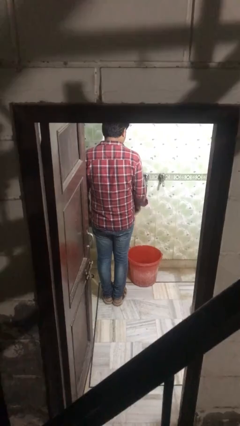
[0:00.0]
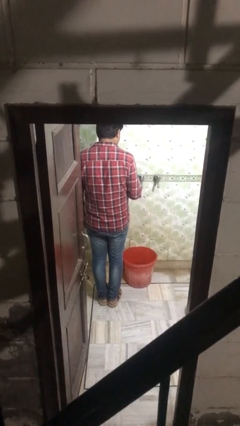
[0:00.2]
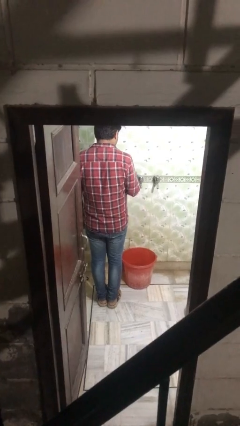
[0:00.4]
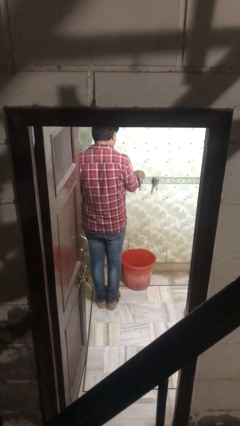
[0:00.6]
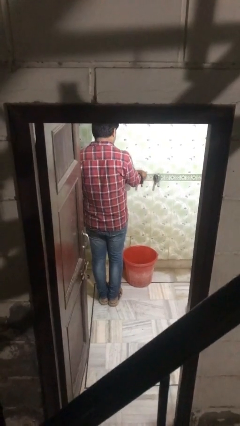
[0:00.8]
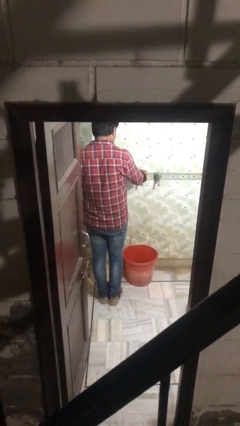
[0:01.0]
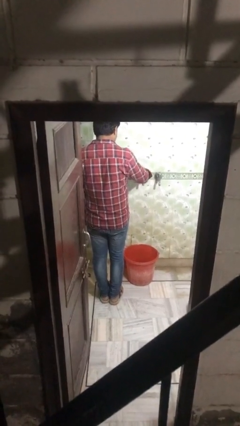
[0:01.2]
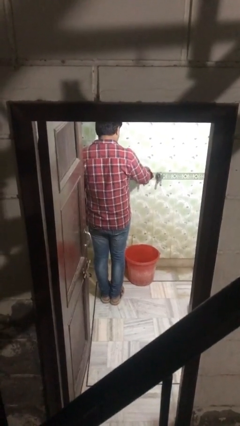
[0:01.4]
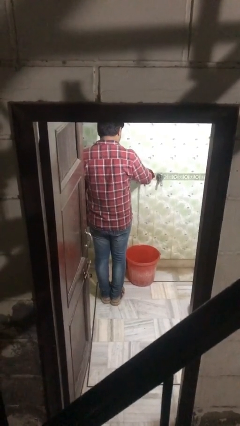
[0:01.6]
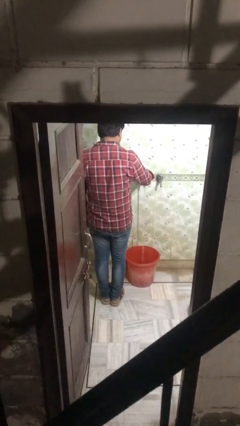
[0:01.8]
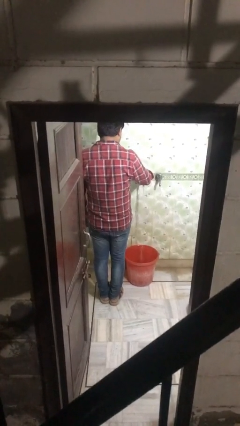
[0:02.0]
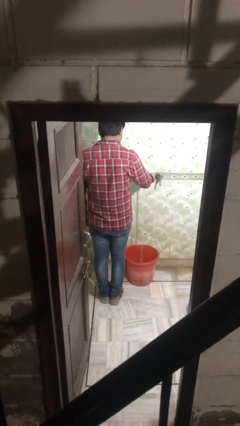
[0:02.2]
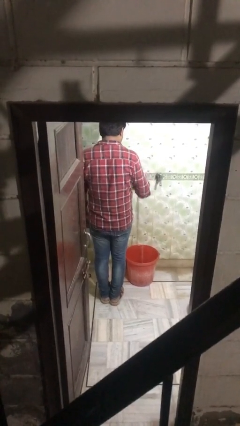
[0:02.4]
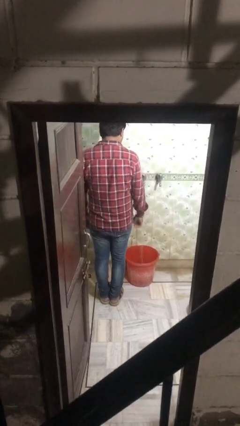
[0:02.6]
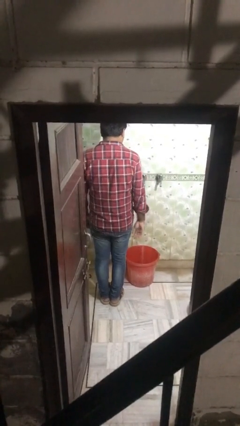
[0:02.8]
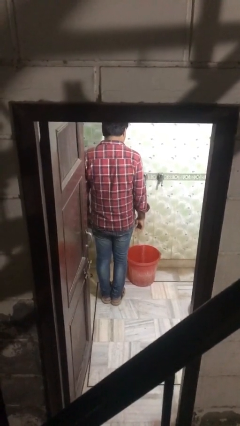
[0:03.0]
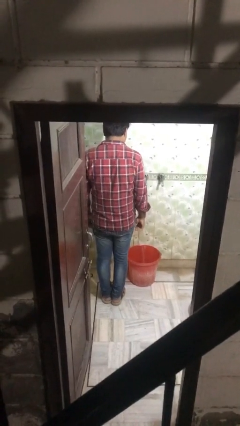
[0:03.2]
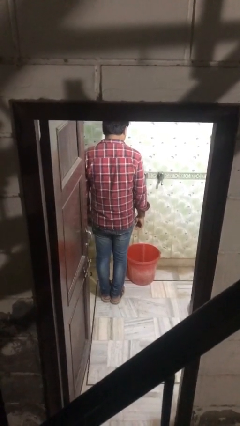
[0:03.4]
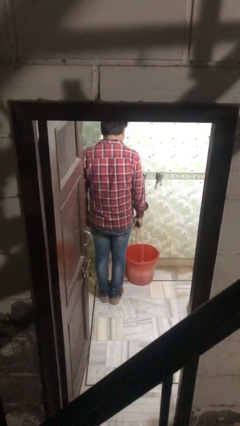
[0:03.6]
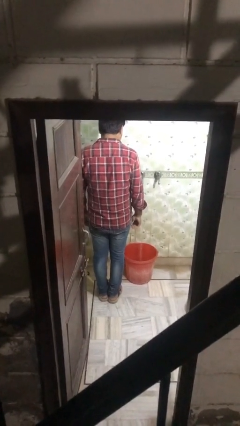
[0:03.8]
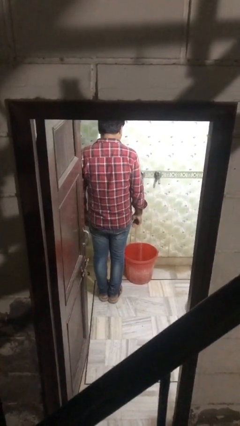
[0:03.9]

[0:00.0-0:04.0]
person turns on faucet

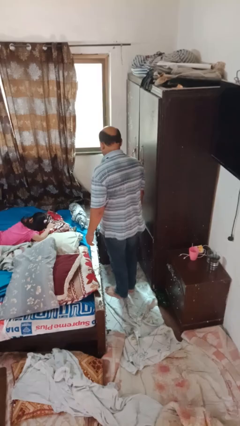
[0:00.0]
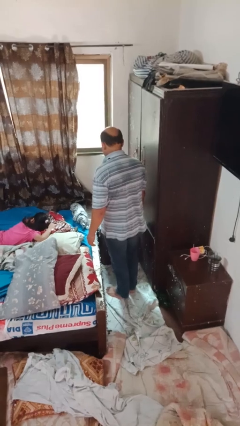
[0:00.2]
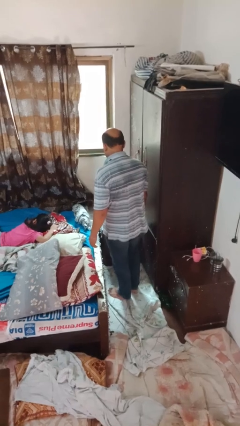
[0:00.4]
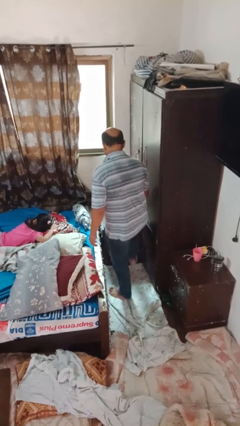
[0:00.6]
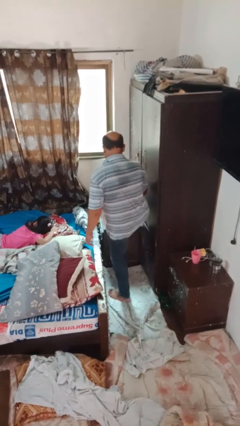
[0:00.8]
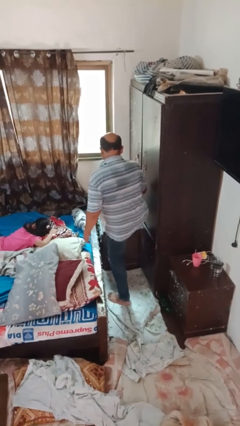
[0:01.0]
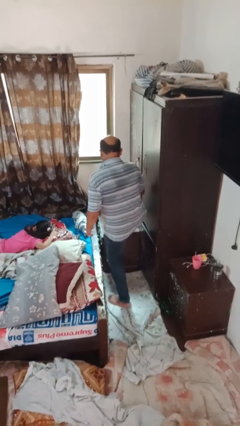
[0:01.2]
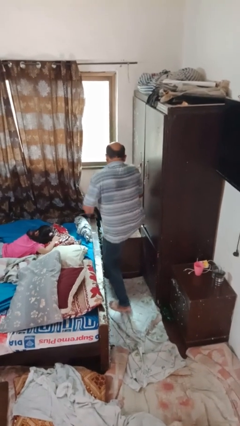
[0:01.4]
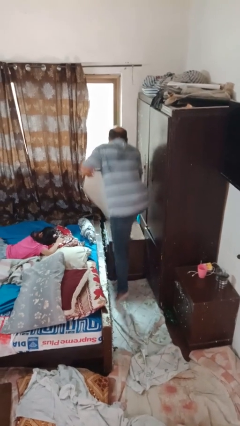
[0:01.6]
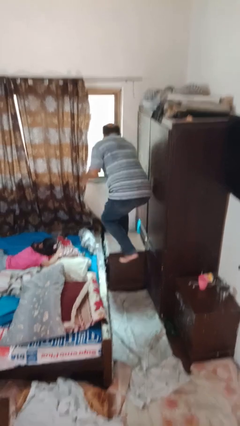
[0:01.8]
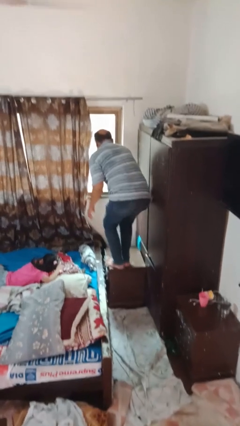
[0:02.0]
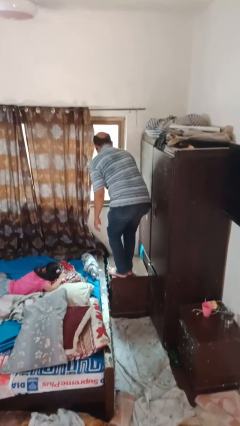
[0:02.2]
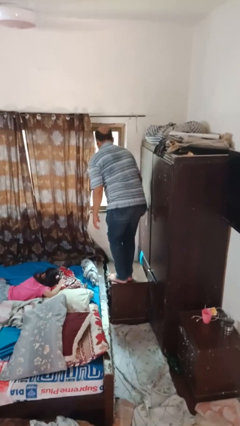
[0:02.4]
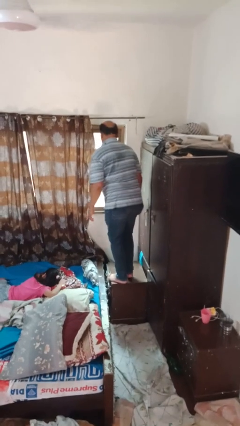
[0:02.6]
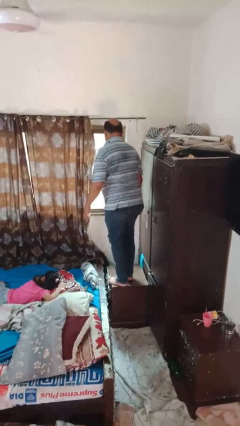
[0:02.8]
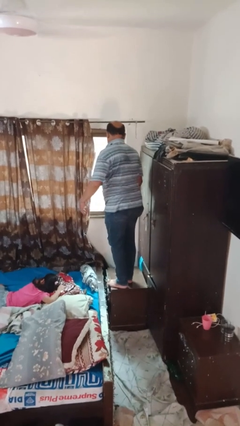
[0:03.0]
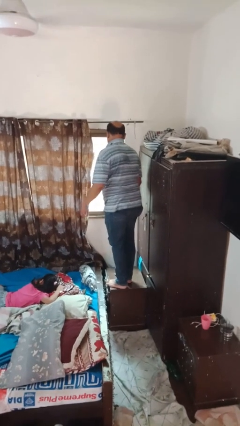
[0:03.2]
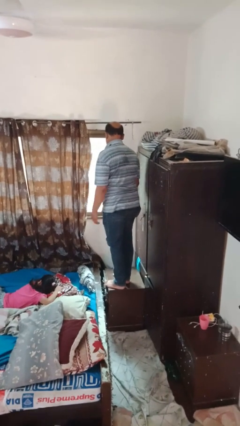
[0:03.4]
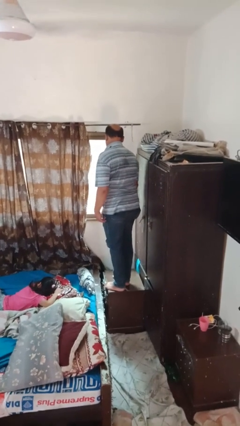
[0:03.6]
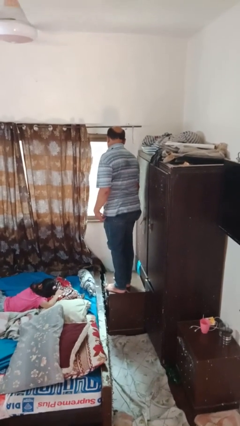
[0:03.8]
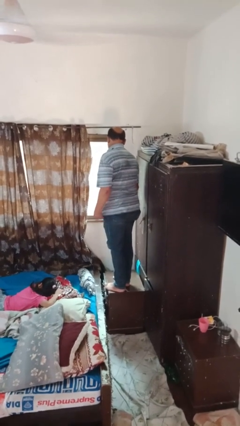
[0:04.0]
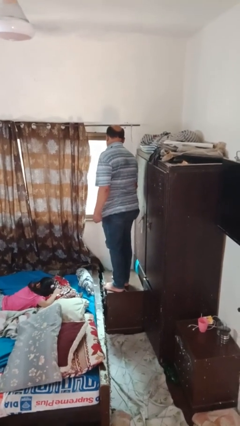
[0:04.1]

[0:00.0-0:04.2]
person climbs on table

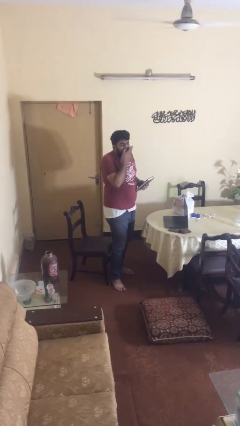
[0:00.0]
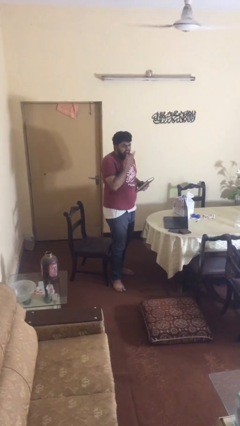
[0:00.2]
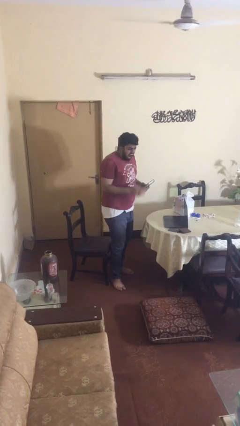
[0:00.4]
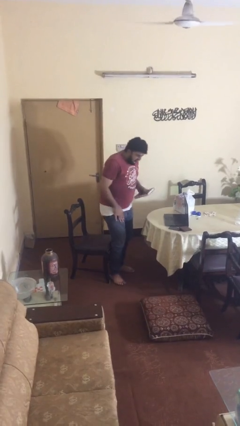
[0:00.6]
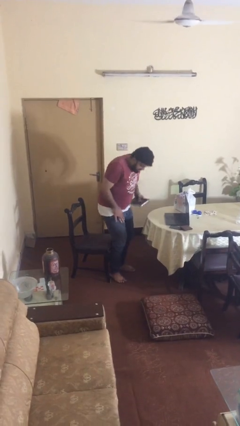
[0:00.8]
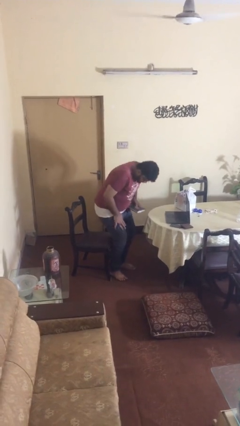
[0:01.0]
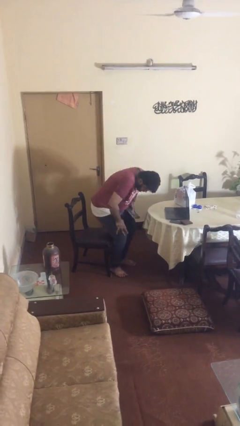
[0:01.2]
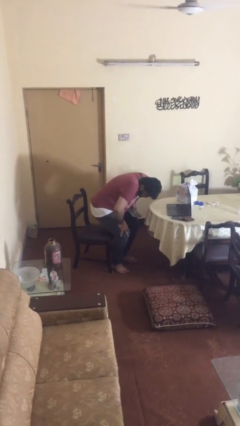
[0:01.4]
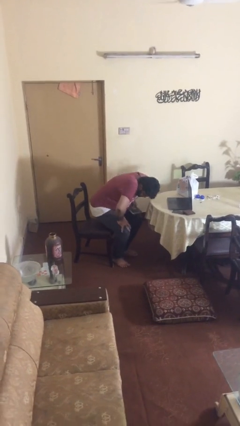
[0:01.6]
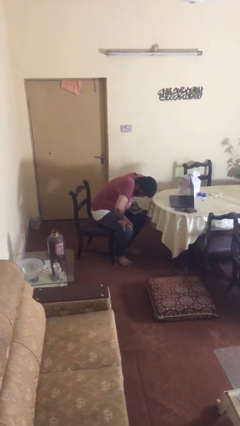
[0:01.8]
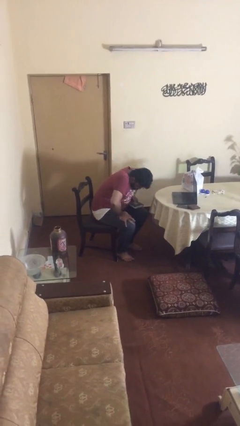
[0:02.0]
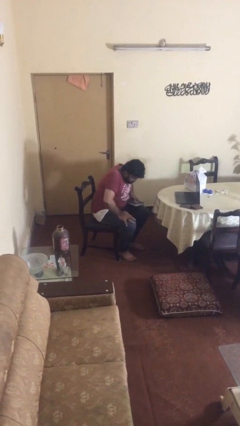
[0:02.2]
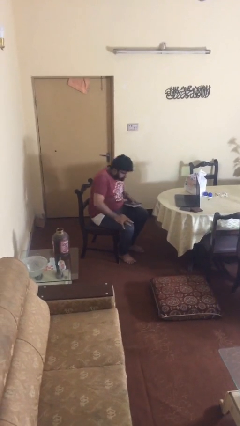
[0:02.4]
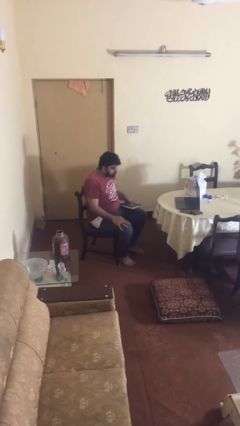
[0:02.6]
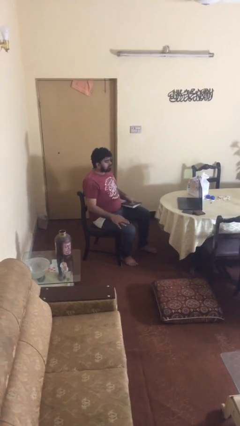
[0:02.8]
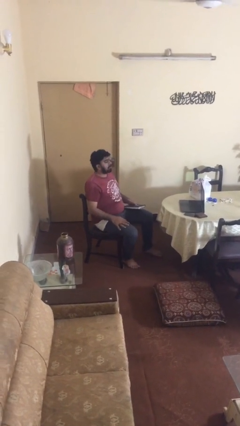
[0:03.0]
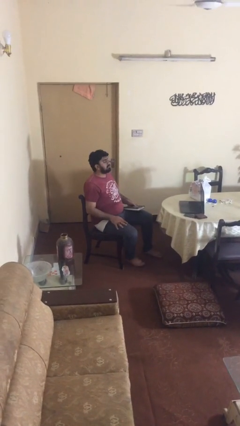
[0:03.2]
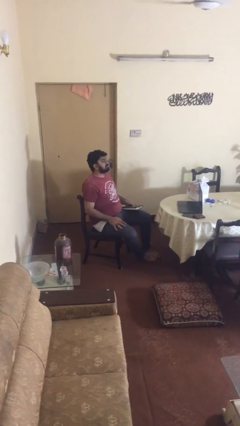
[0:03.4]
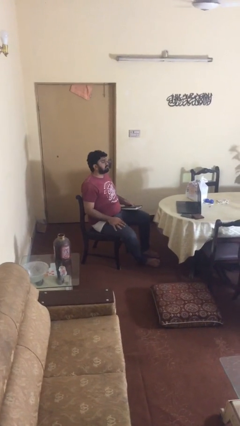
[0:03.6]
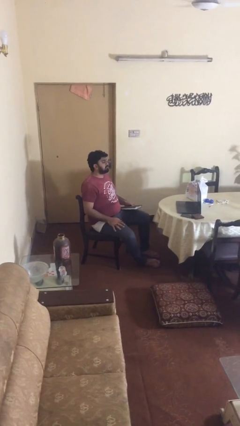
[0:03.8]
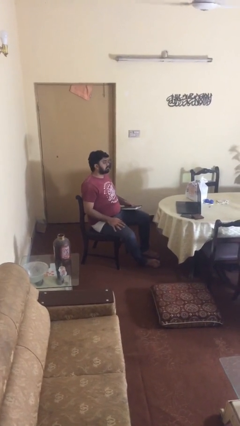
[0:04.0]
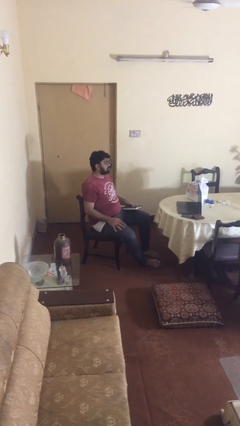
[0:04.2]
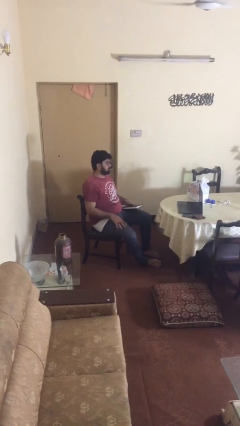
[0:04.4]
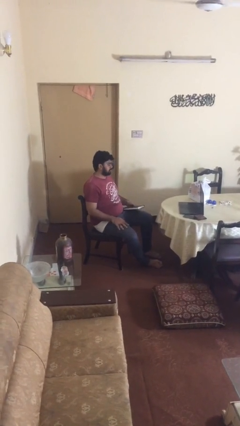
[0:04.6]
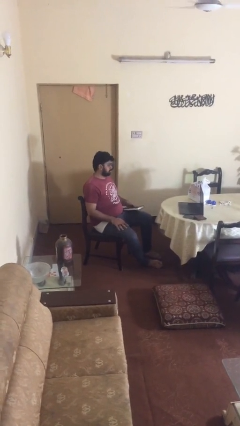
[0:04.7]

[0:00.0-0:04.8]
person sits down

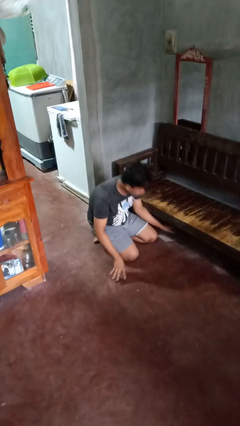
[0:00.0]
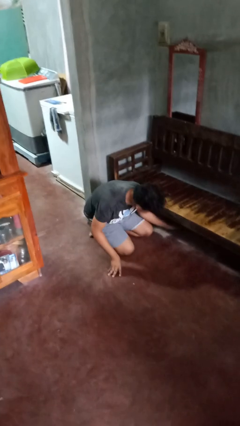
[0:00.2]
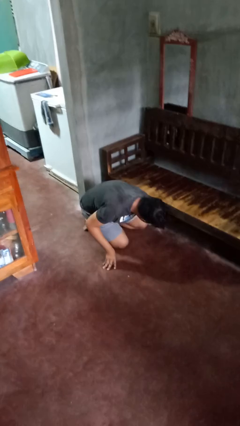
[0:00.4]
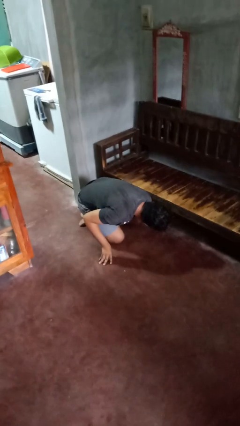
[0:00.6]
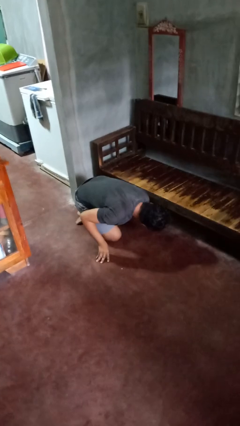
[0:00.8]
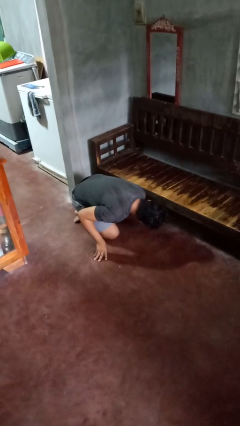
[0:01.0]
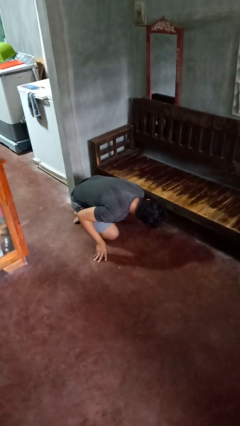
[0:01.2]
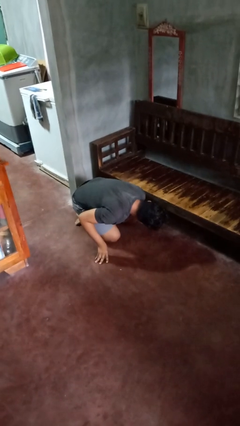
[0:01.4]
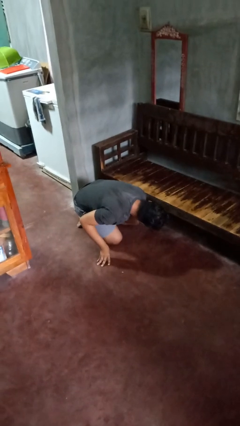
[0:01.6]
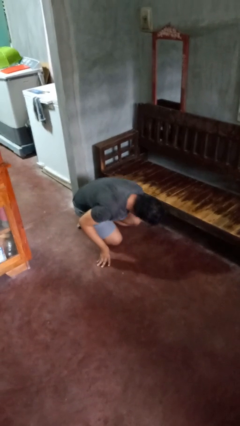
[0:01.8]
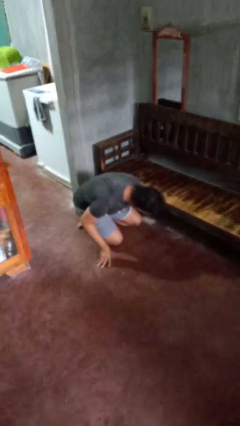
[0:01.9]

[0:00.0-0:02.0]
person searches under couch

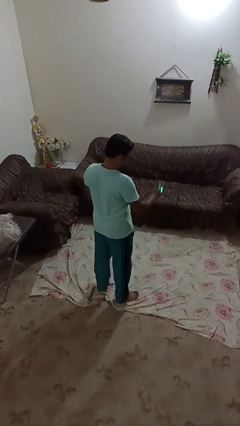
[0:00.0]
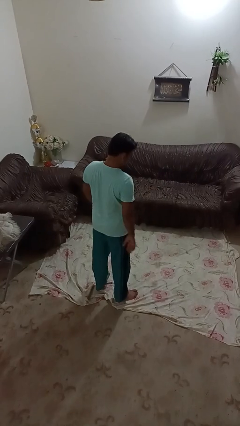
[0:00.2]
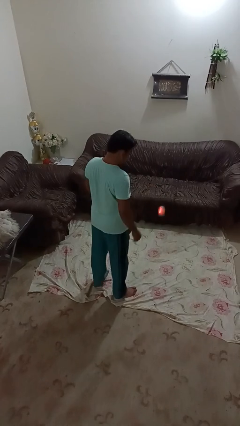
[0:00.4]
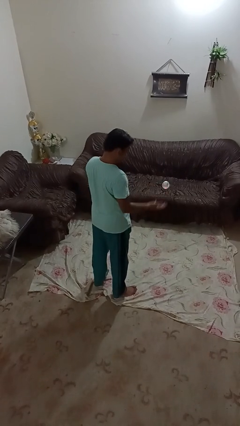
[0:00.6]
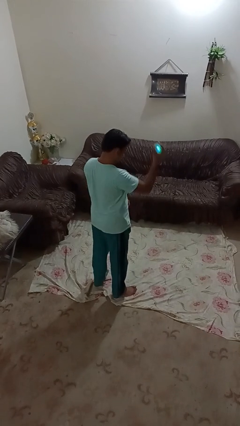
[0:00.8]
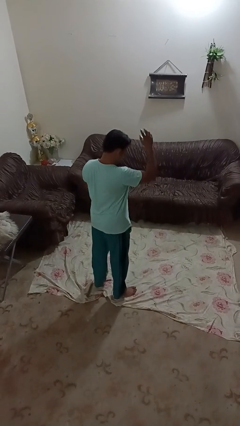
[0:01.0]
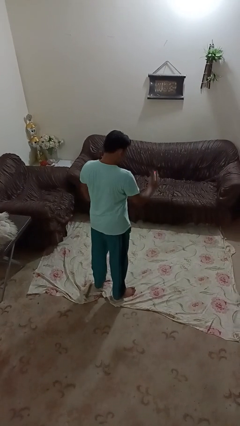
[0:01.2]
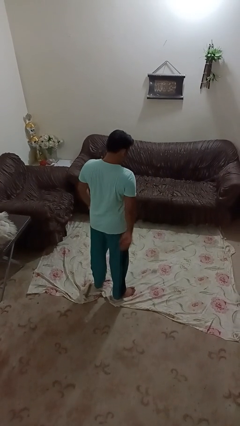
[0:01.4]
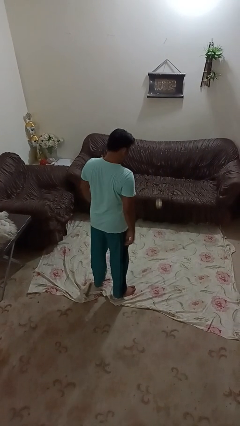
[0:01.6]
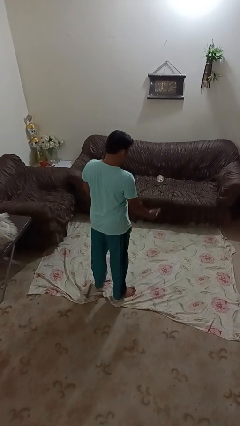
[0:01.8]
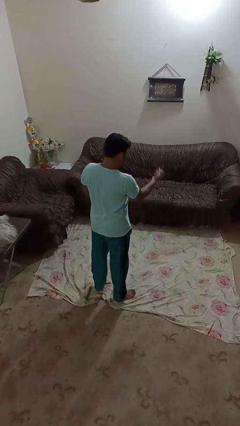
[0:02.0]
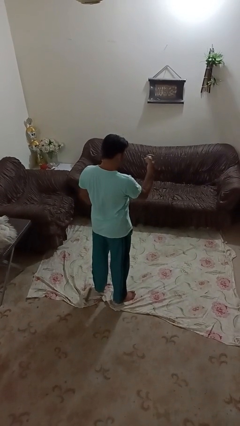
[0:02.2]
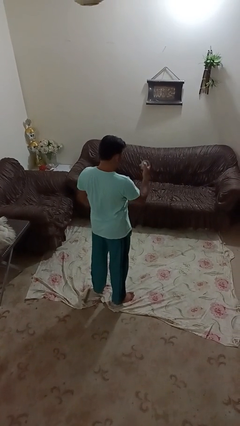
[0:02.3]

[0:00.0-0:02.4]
person bounces ball on floor

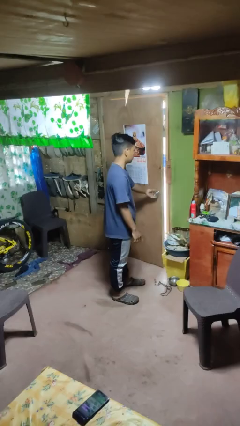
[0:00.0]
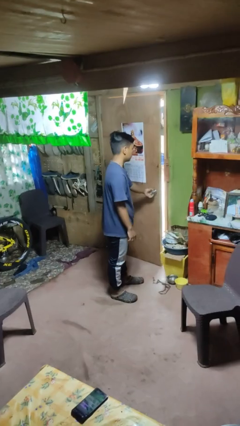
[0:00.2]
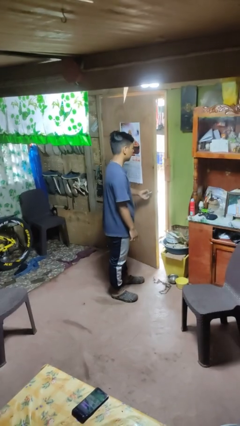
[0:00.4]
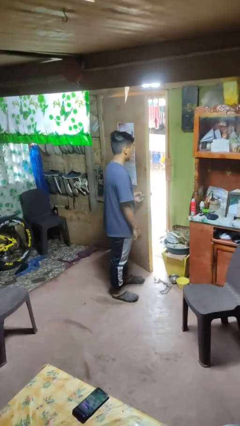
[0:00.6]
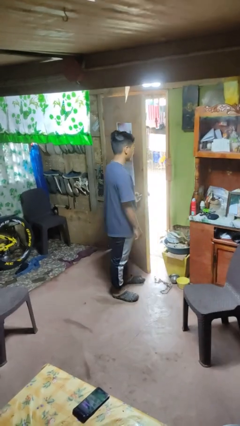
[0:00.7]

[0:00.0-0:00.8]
person opens facility door
